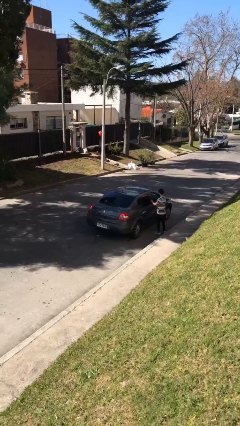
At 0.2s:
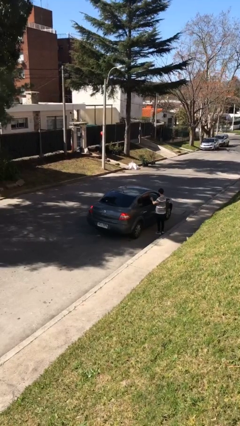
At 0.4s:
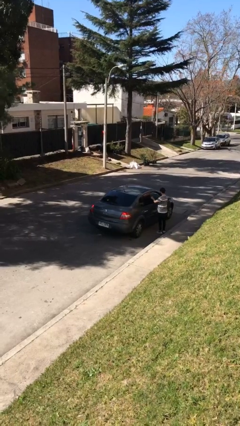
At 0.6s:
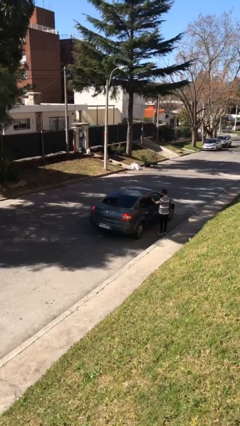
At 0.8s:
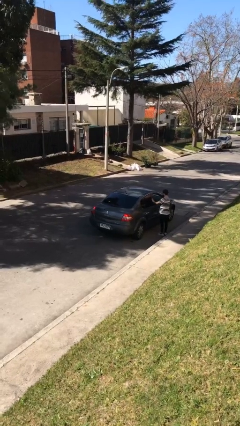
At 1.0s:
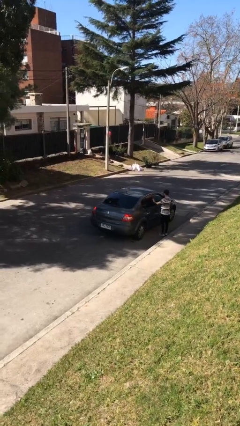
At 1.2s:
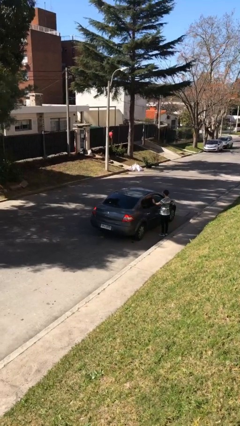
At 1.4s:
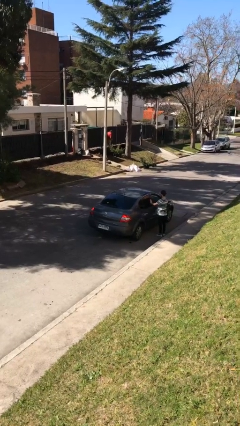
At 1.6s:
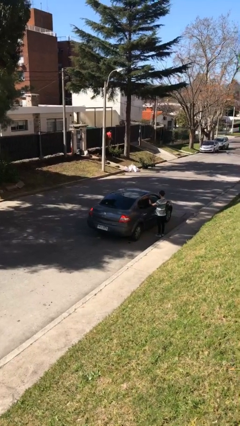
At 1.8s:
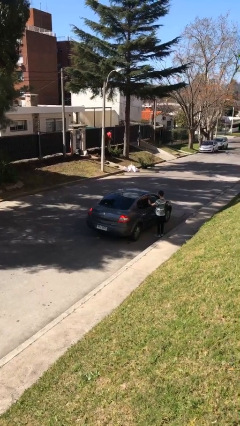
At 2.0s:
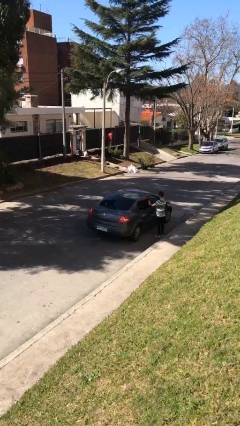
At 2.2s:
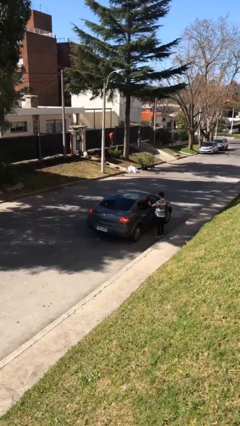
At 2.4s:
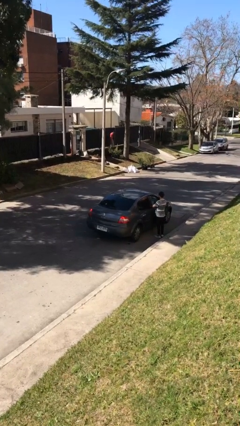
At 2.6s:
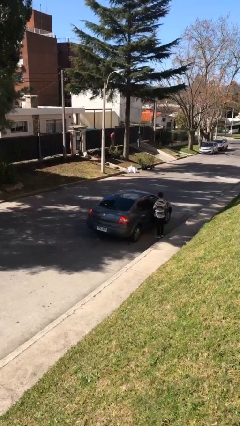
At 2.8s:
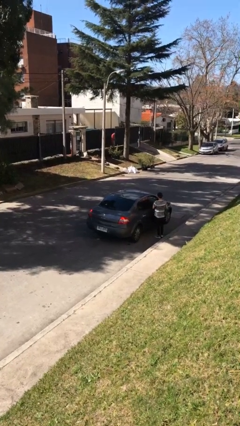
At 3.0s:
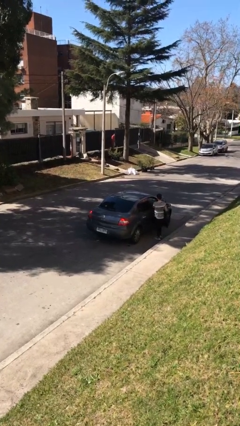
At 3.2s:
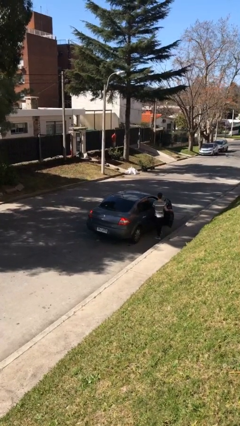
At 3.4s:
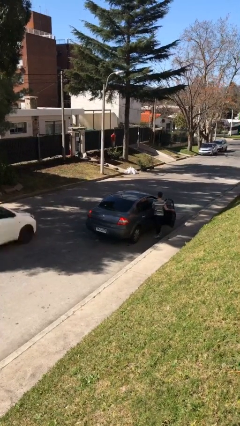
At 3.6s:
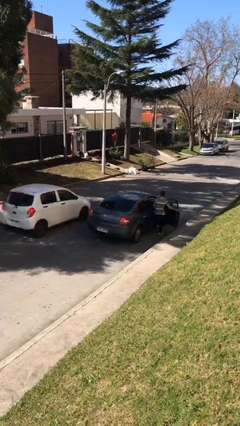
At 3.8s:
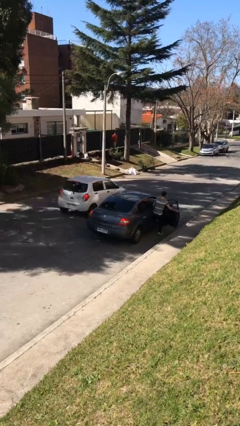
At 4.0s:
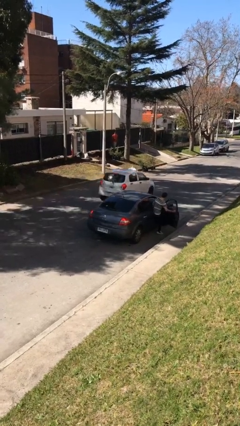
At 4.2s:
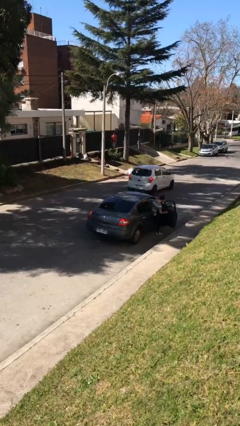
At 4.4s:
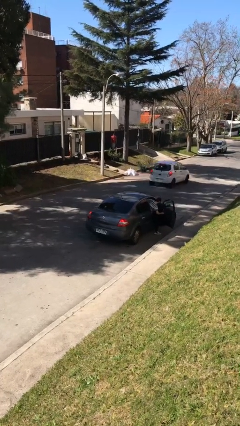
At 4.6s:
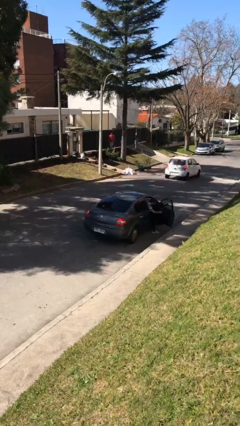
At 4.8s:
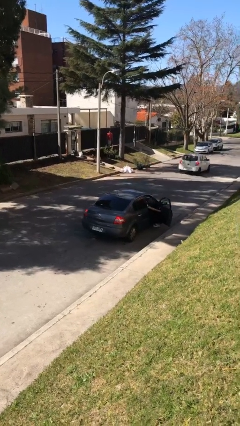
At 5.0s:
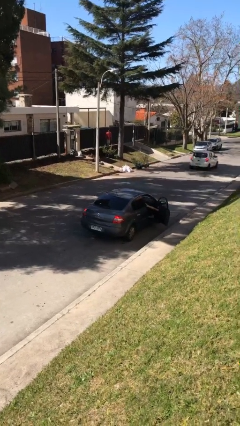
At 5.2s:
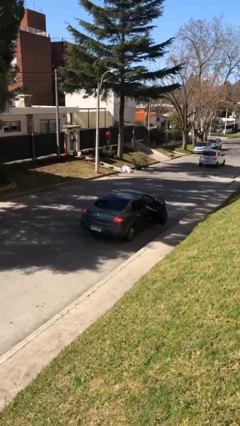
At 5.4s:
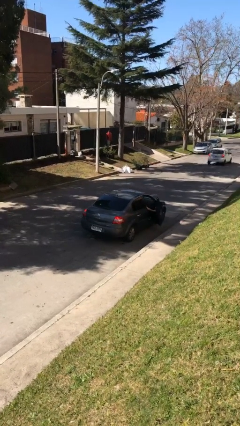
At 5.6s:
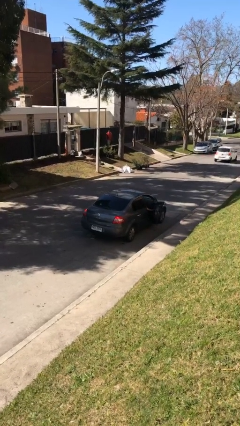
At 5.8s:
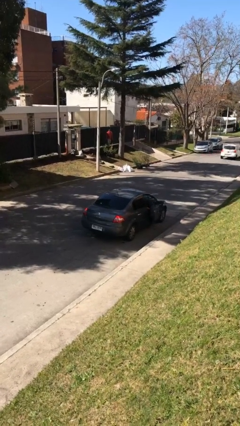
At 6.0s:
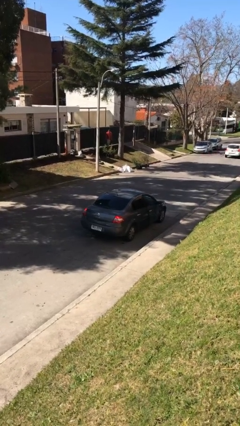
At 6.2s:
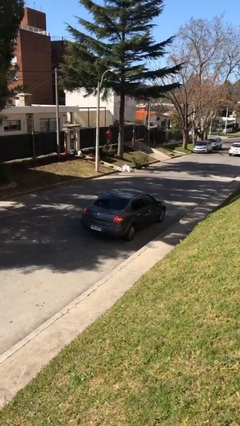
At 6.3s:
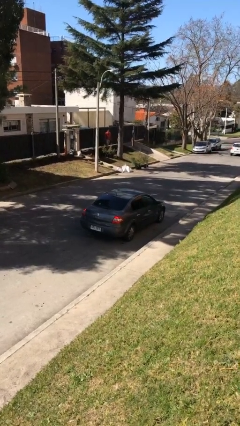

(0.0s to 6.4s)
car picks up person

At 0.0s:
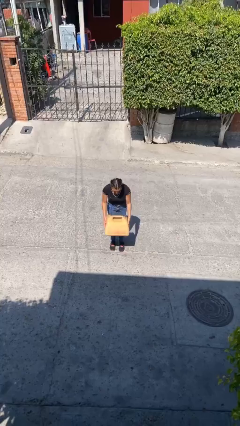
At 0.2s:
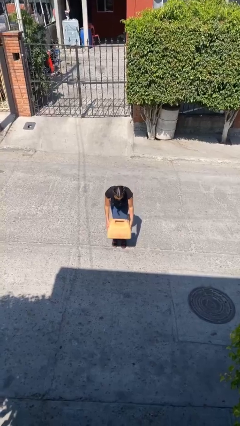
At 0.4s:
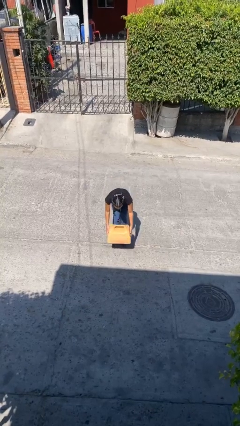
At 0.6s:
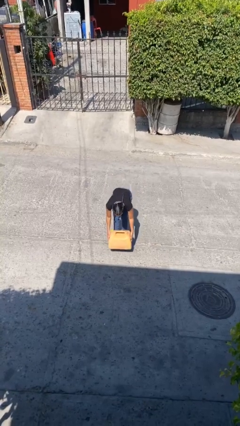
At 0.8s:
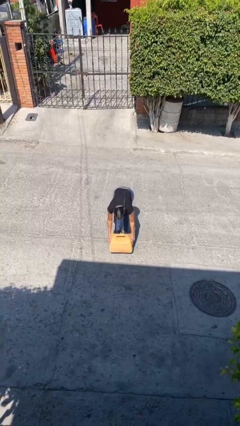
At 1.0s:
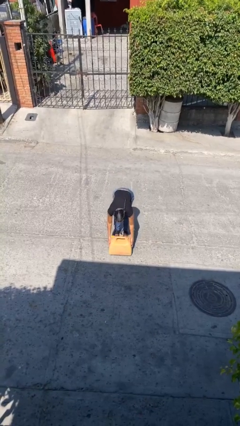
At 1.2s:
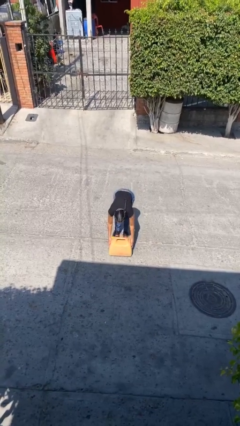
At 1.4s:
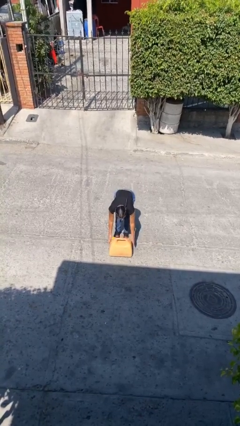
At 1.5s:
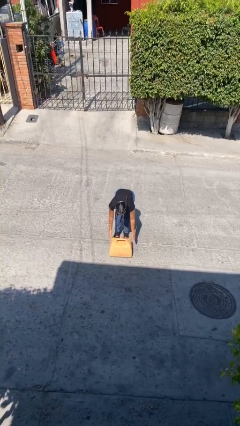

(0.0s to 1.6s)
person puts down object on floor

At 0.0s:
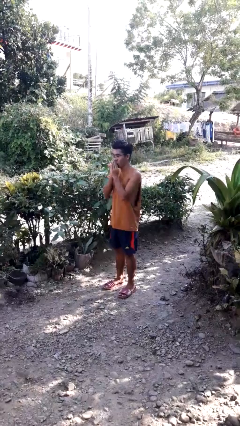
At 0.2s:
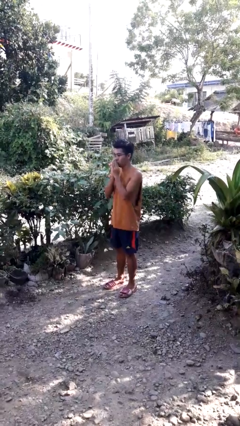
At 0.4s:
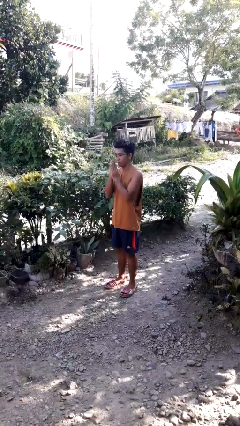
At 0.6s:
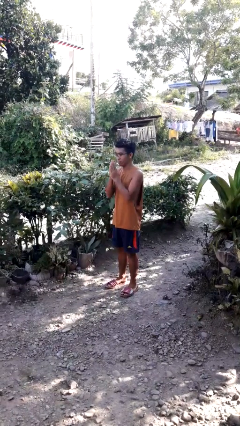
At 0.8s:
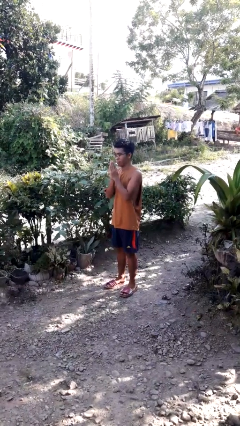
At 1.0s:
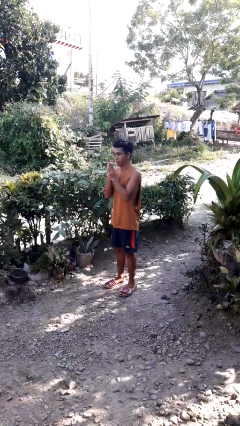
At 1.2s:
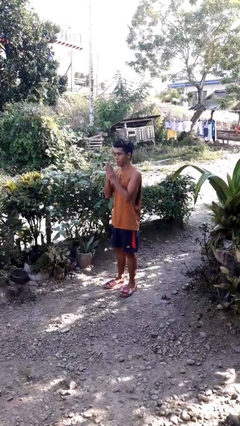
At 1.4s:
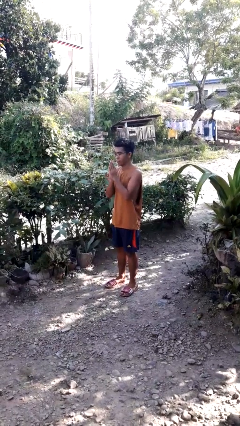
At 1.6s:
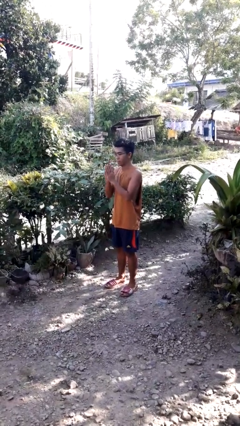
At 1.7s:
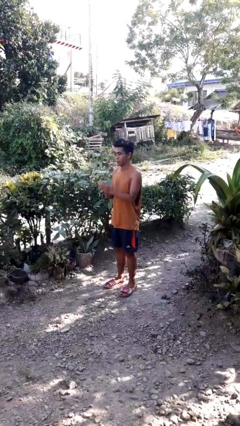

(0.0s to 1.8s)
person blows into hands

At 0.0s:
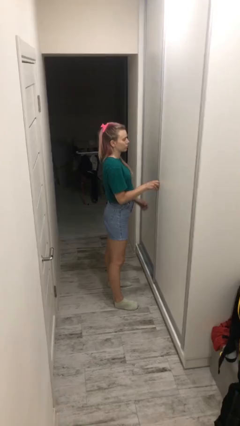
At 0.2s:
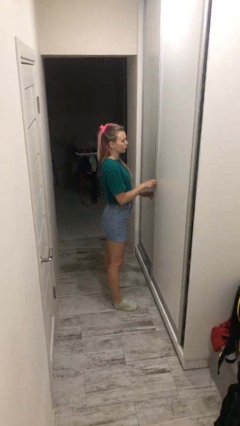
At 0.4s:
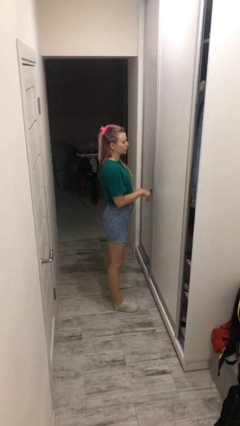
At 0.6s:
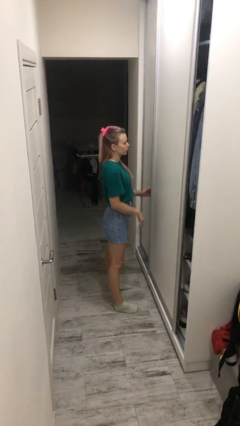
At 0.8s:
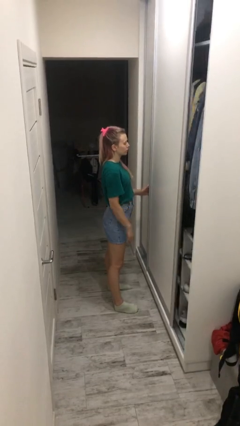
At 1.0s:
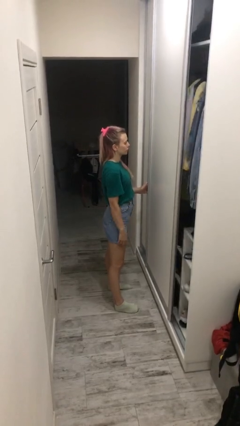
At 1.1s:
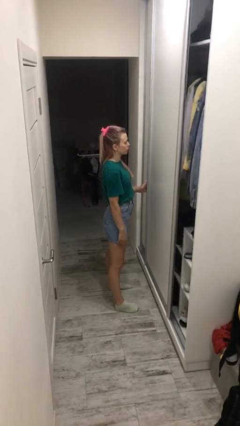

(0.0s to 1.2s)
person opens sliding door

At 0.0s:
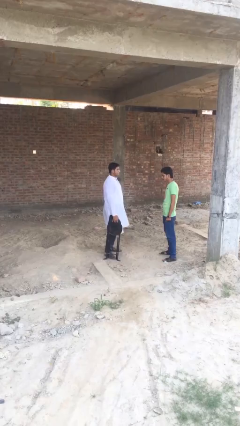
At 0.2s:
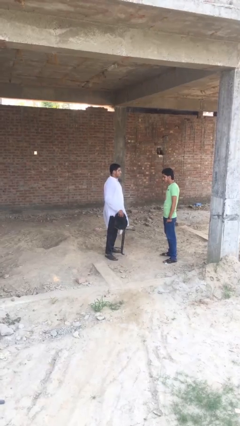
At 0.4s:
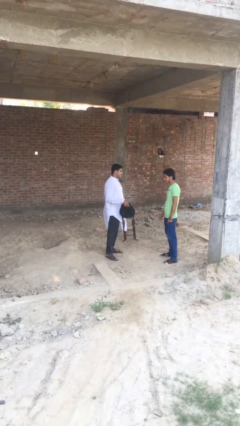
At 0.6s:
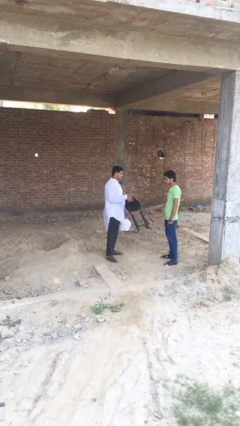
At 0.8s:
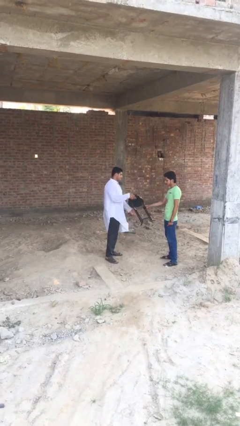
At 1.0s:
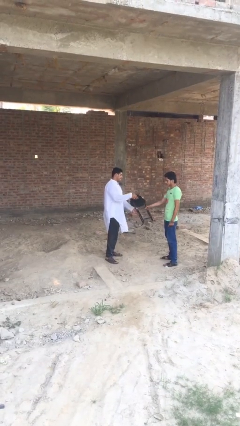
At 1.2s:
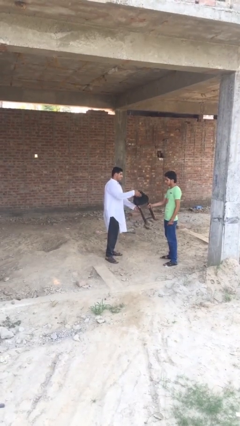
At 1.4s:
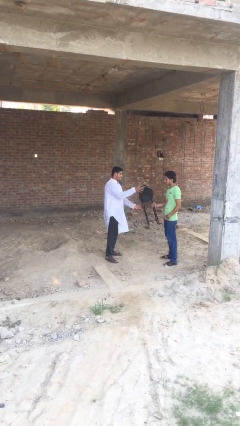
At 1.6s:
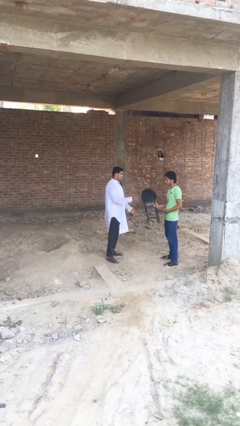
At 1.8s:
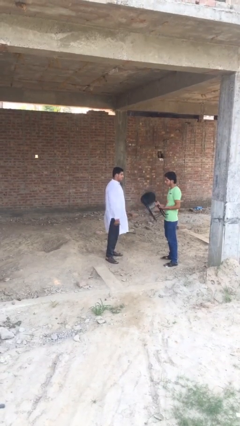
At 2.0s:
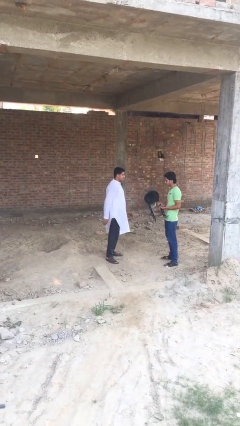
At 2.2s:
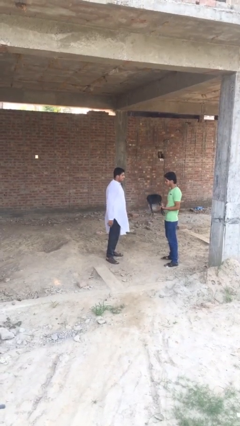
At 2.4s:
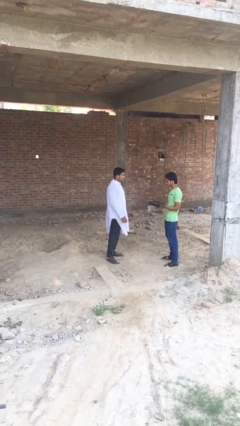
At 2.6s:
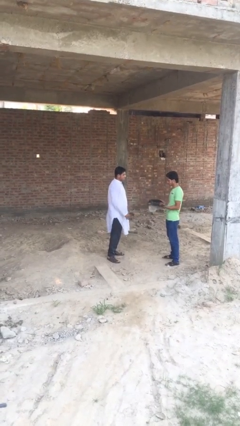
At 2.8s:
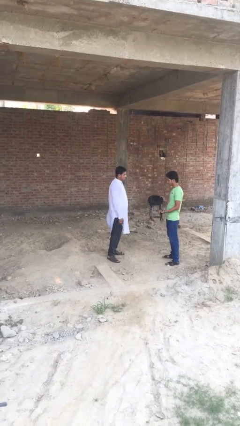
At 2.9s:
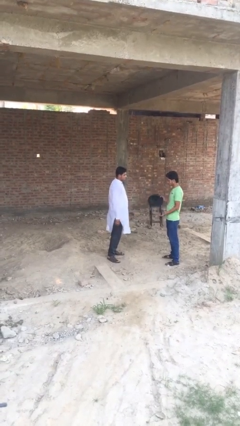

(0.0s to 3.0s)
person transfers object to person

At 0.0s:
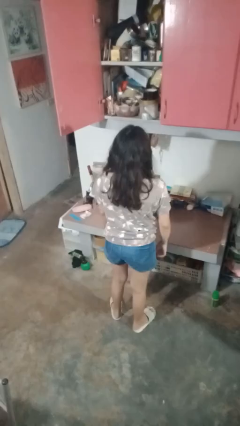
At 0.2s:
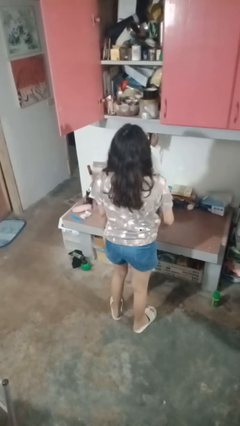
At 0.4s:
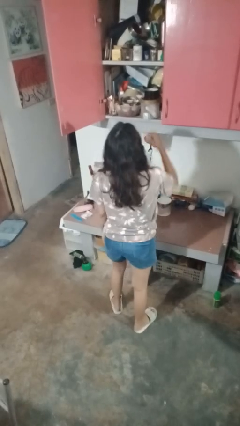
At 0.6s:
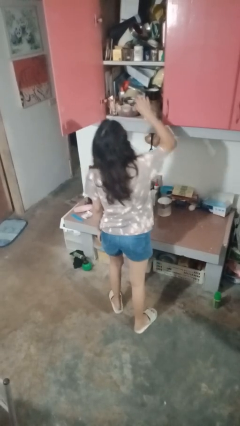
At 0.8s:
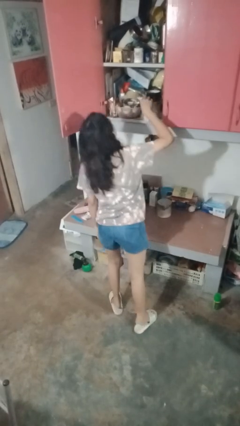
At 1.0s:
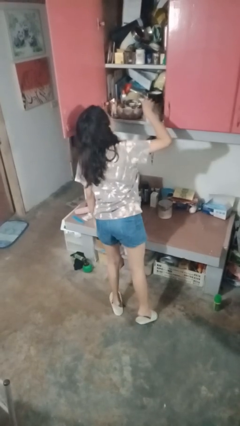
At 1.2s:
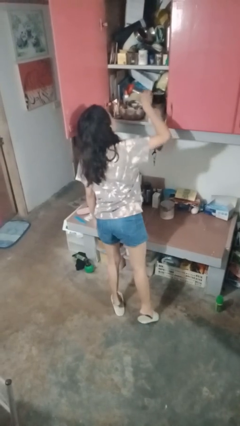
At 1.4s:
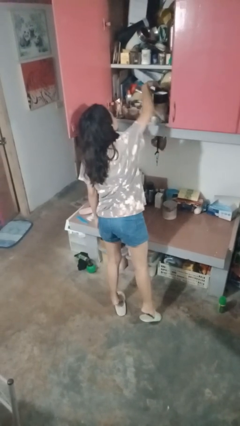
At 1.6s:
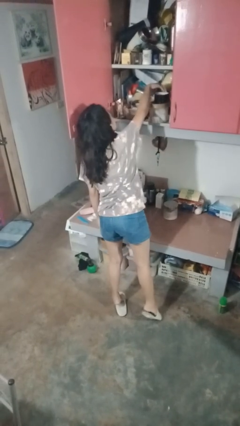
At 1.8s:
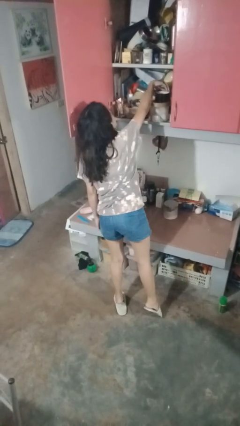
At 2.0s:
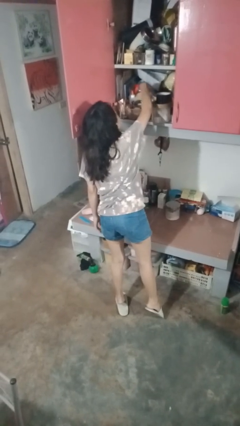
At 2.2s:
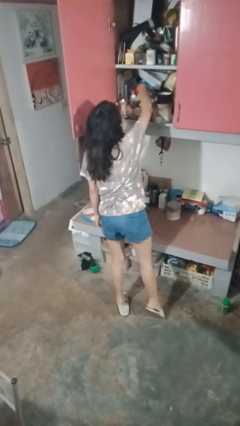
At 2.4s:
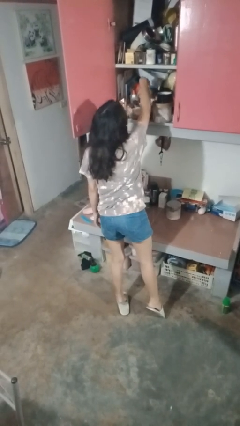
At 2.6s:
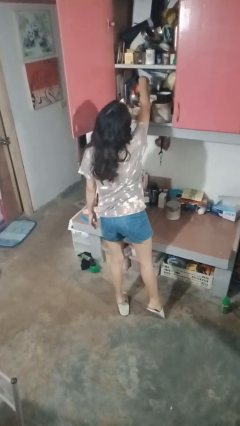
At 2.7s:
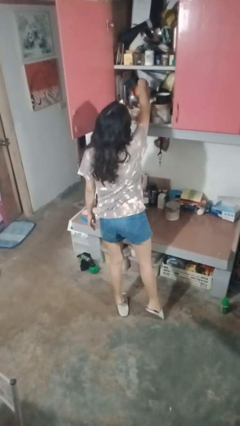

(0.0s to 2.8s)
person searches in cabinet

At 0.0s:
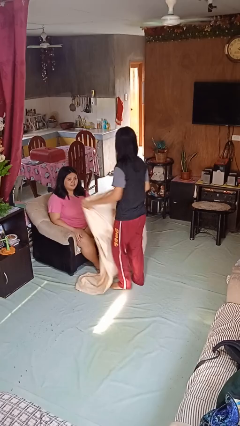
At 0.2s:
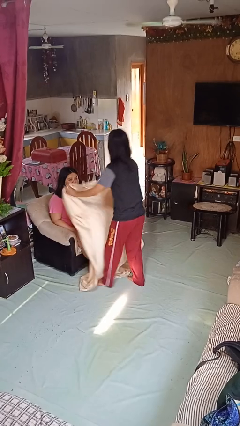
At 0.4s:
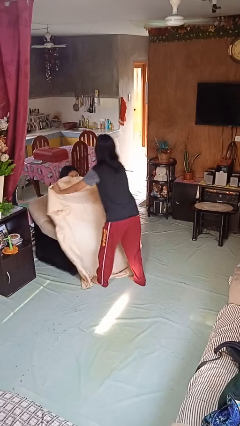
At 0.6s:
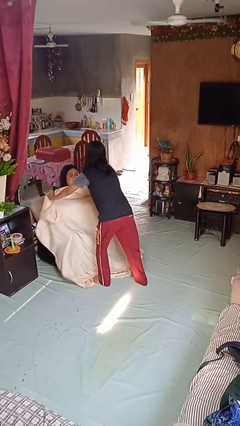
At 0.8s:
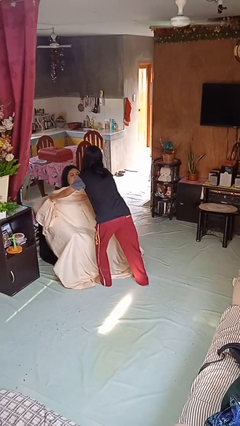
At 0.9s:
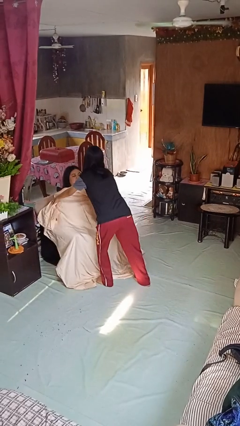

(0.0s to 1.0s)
person covers friend with blanket
